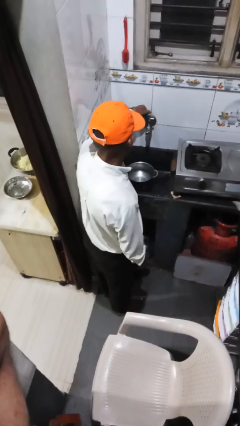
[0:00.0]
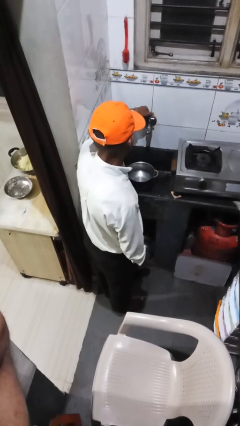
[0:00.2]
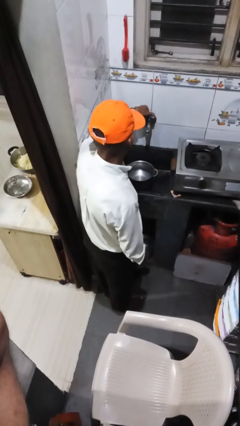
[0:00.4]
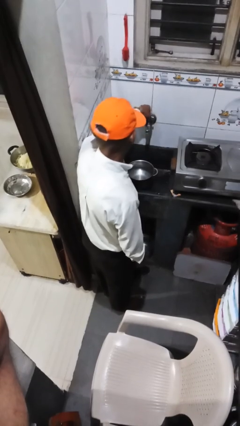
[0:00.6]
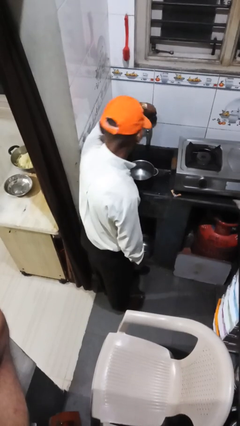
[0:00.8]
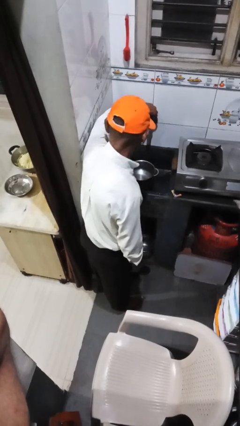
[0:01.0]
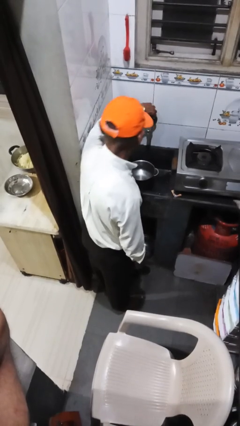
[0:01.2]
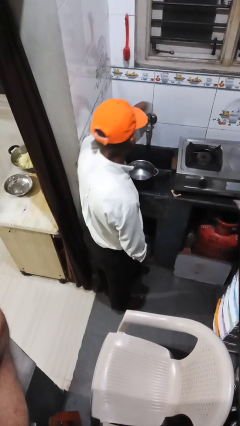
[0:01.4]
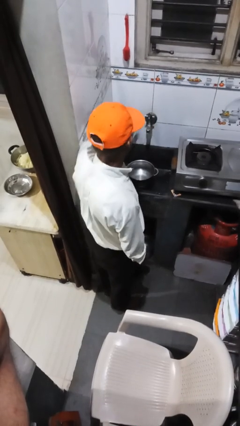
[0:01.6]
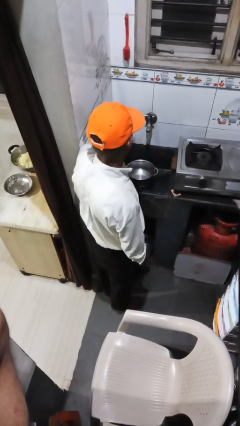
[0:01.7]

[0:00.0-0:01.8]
person turns off faucet

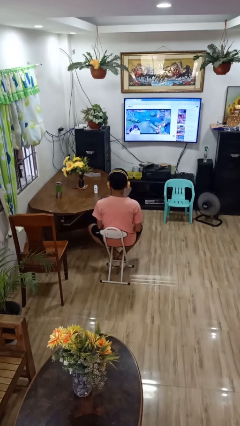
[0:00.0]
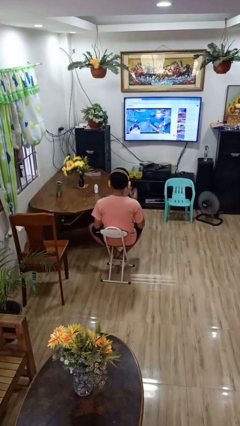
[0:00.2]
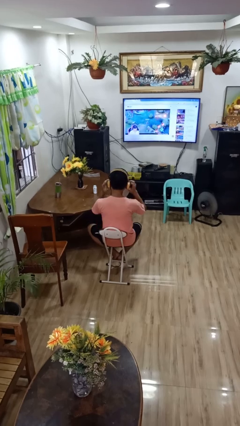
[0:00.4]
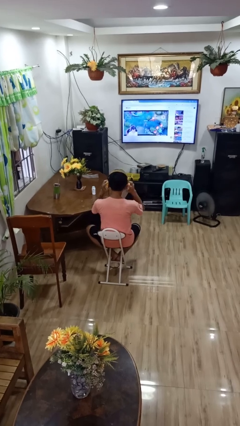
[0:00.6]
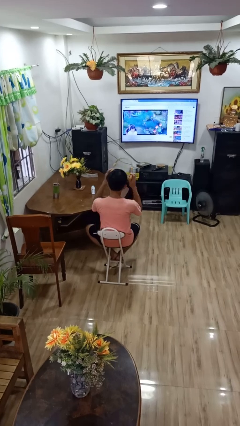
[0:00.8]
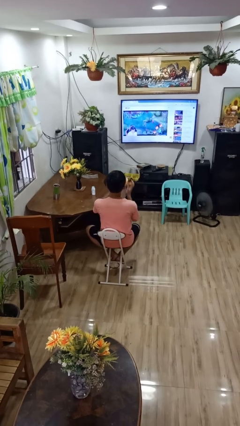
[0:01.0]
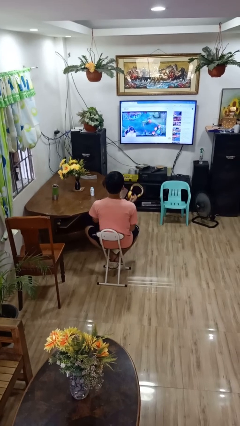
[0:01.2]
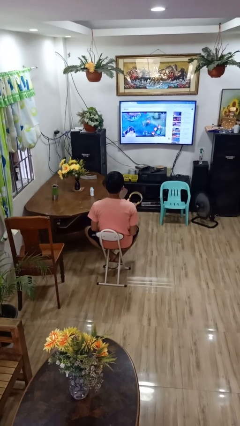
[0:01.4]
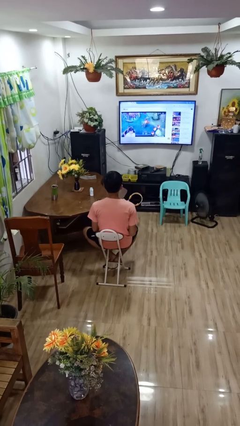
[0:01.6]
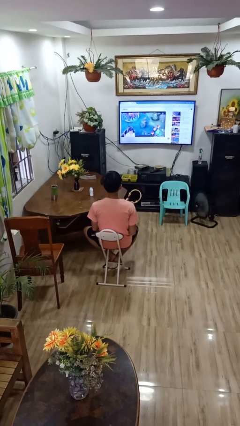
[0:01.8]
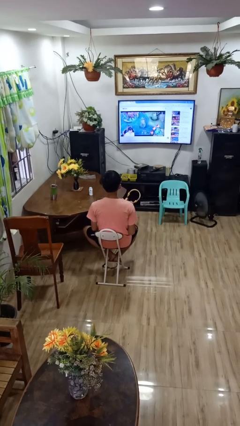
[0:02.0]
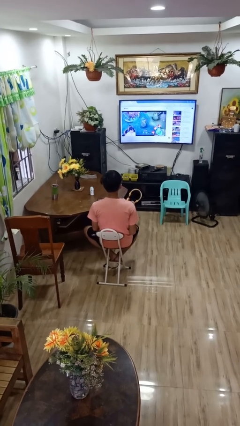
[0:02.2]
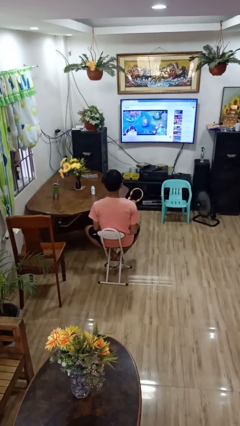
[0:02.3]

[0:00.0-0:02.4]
person takes off headphones

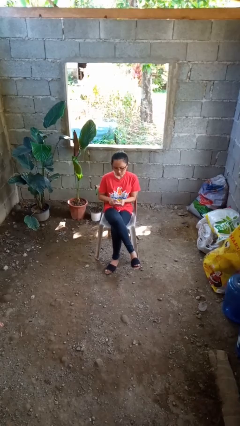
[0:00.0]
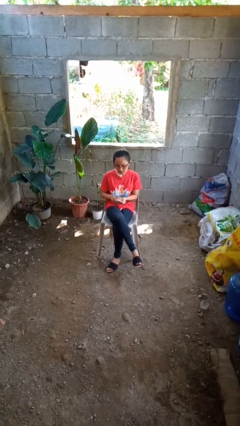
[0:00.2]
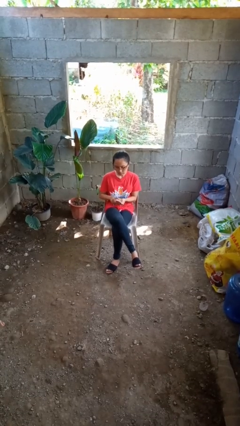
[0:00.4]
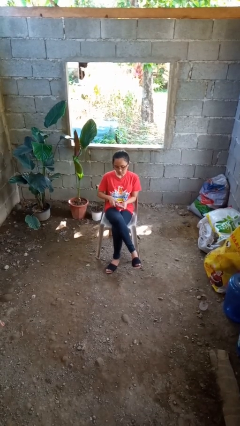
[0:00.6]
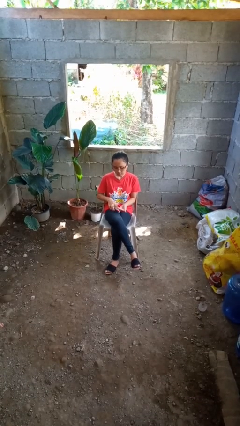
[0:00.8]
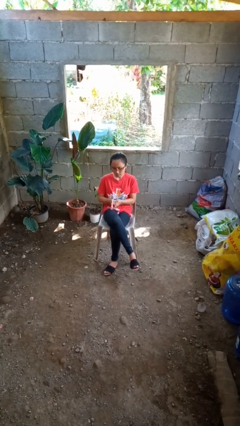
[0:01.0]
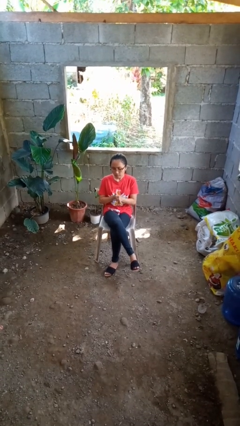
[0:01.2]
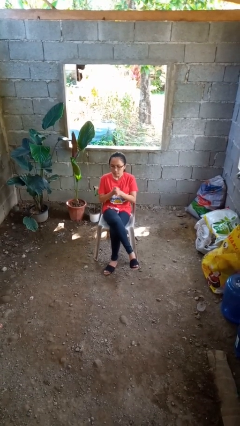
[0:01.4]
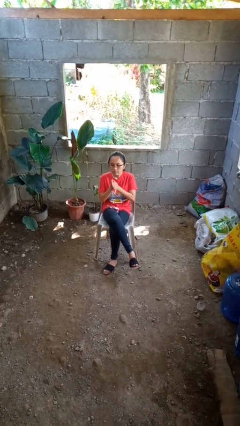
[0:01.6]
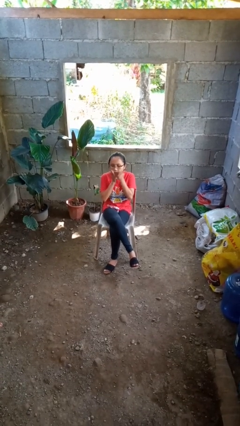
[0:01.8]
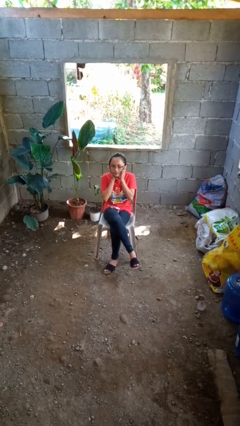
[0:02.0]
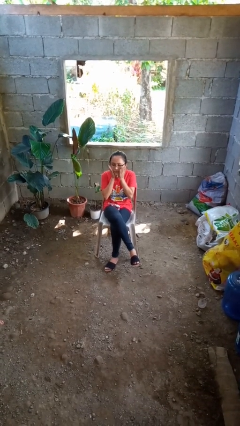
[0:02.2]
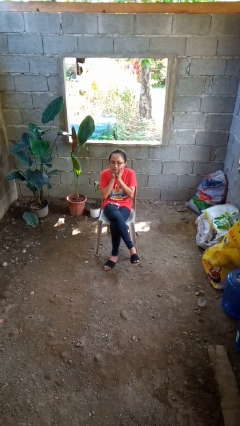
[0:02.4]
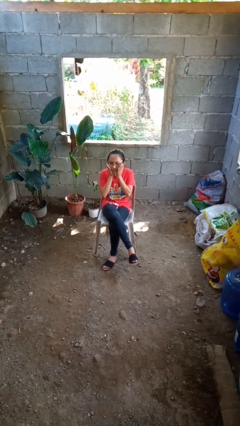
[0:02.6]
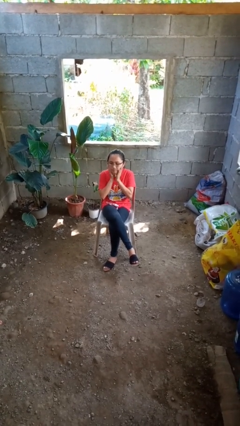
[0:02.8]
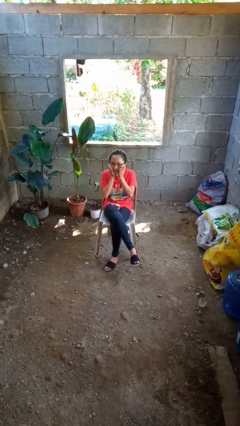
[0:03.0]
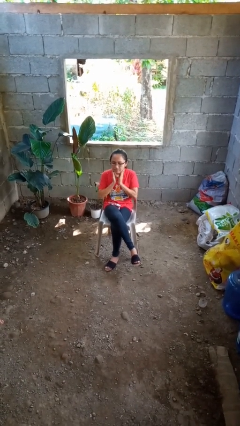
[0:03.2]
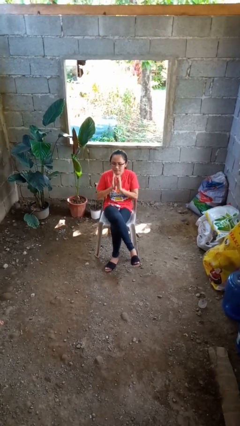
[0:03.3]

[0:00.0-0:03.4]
person applies facial moisturizer

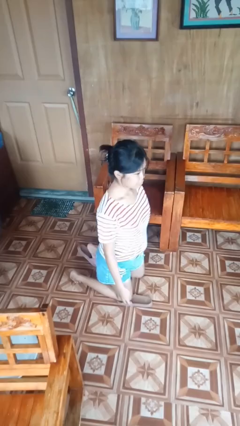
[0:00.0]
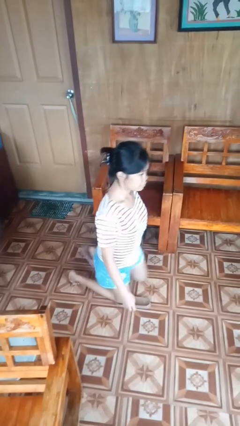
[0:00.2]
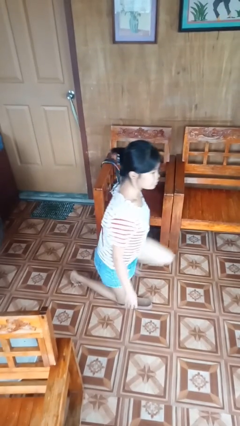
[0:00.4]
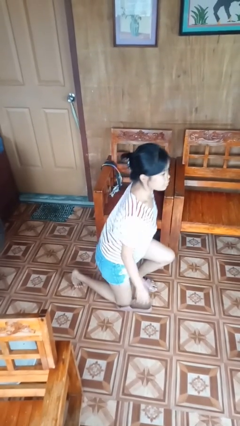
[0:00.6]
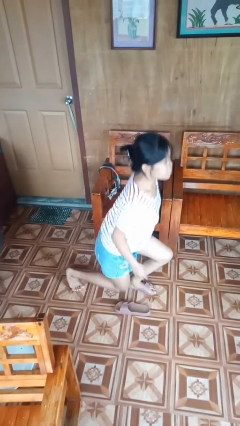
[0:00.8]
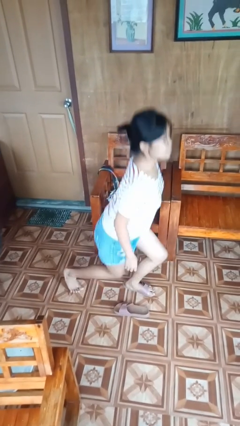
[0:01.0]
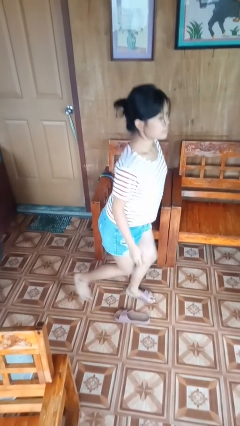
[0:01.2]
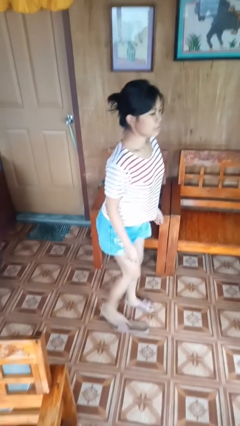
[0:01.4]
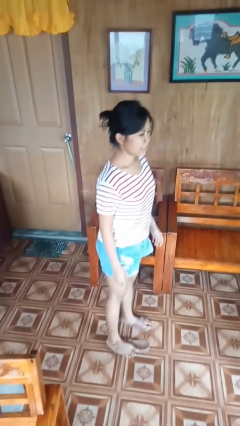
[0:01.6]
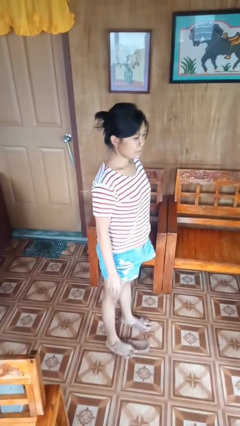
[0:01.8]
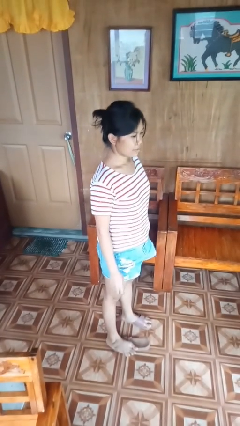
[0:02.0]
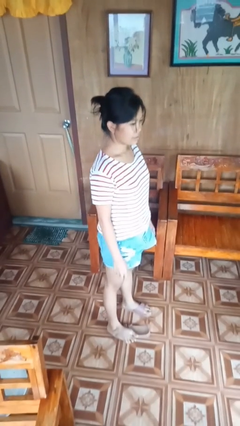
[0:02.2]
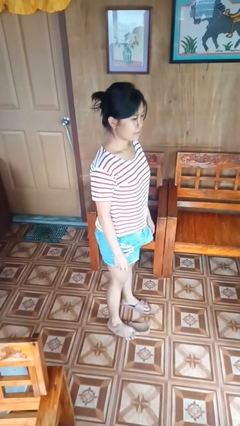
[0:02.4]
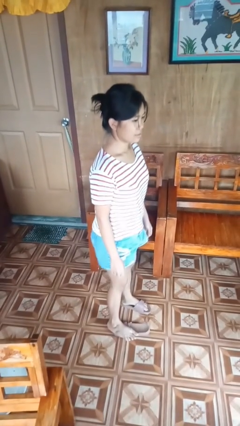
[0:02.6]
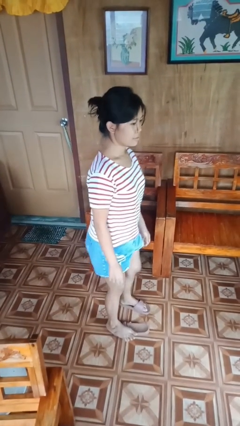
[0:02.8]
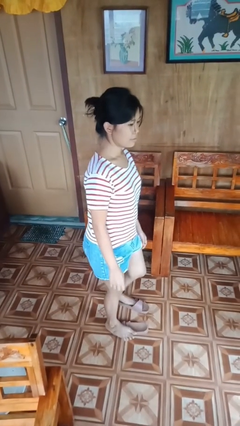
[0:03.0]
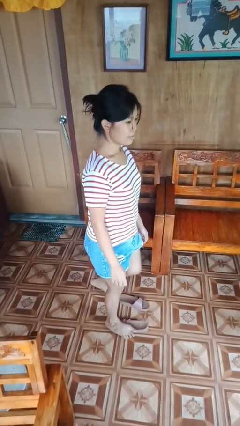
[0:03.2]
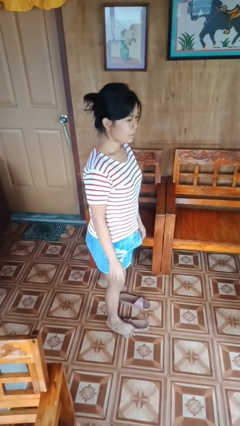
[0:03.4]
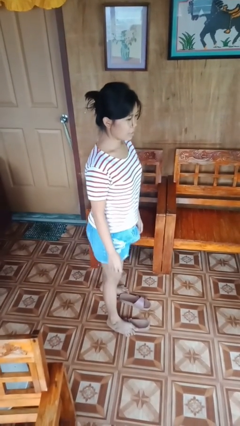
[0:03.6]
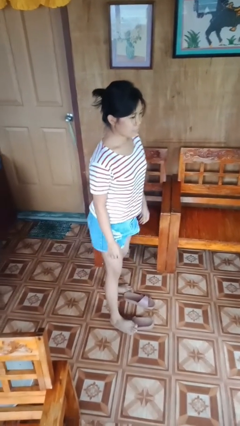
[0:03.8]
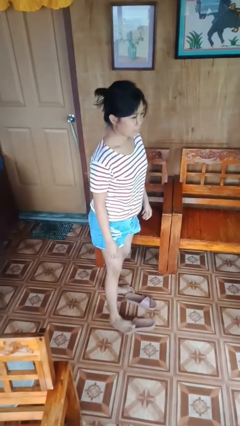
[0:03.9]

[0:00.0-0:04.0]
person stands up from floor

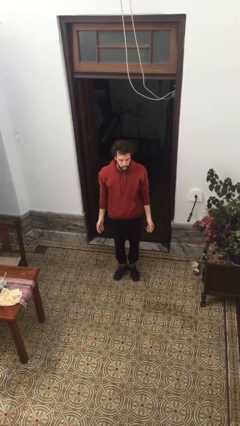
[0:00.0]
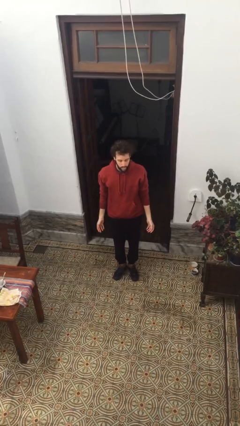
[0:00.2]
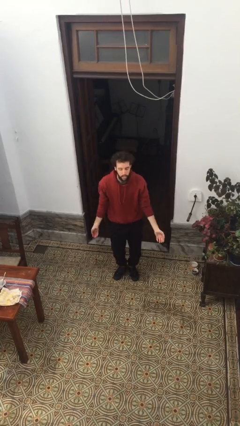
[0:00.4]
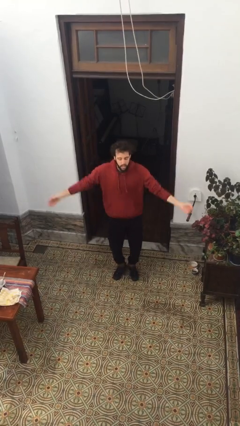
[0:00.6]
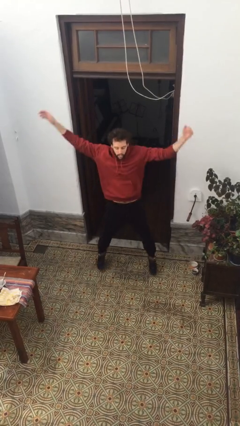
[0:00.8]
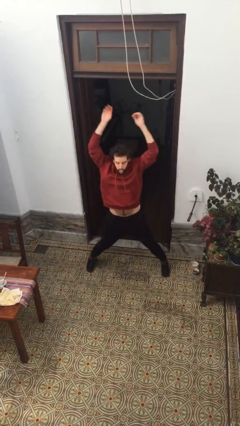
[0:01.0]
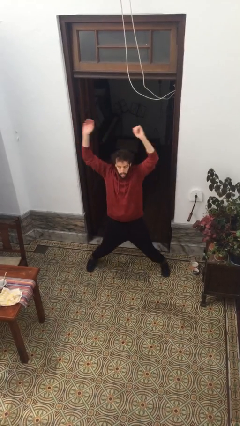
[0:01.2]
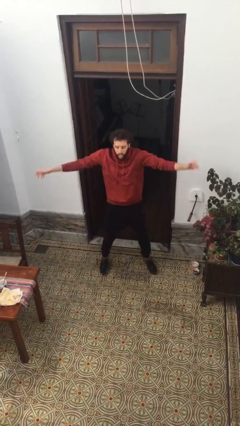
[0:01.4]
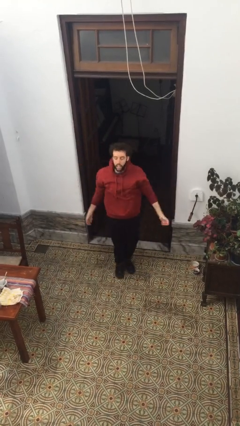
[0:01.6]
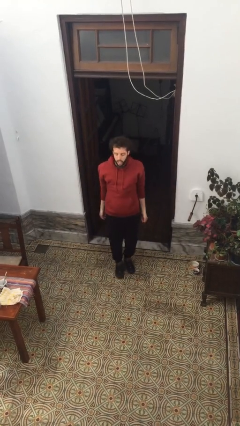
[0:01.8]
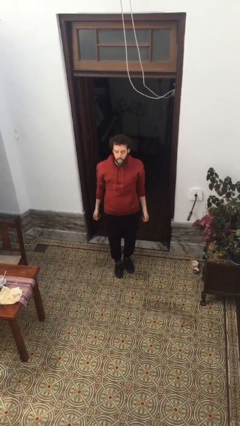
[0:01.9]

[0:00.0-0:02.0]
person exercises with jumping jacks

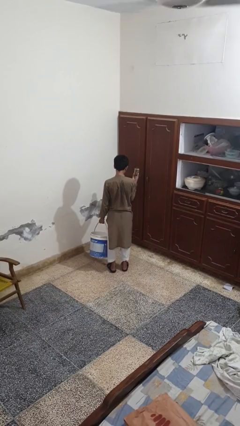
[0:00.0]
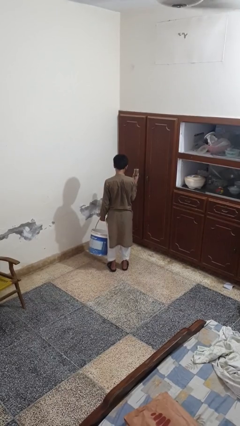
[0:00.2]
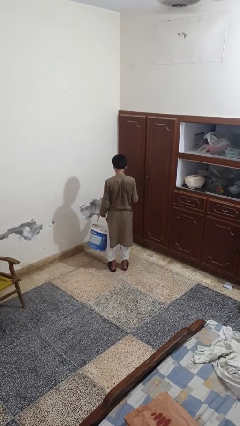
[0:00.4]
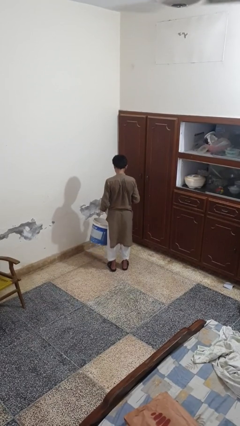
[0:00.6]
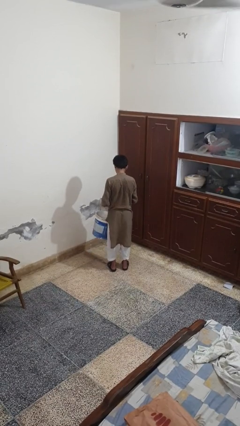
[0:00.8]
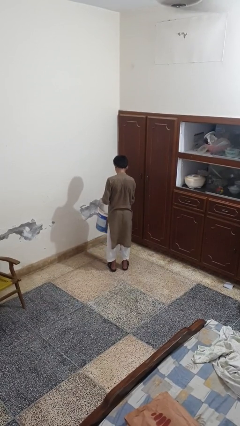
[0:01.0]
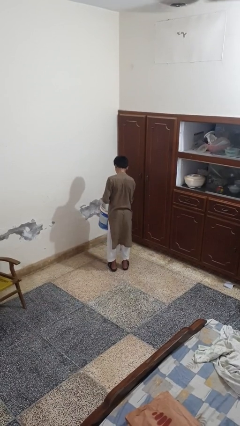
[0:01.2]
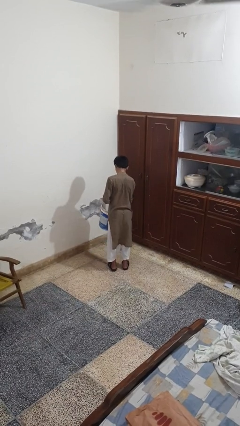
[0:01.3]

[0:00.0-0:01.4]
person puts object into basket

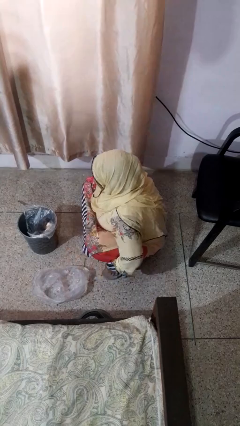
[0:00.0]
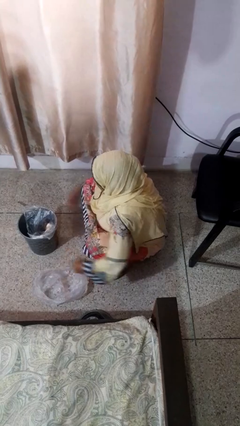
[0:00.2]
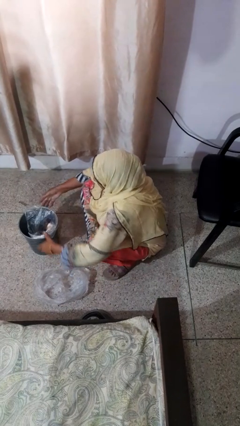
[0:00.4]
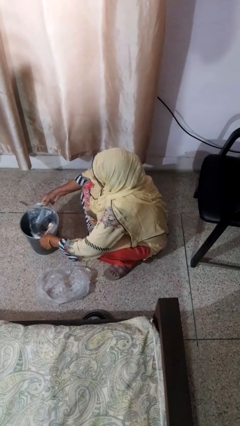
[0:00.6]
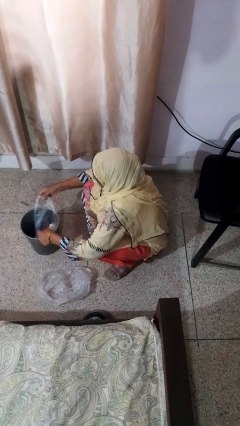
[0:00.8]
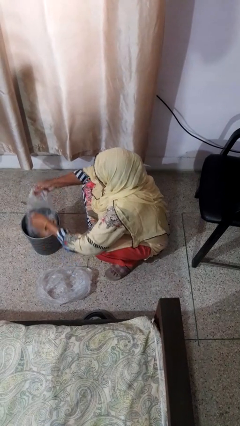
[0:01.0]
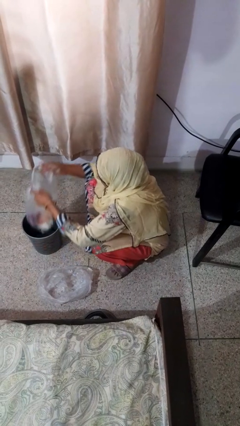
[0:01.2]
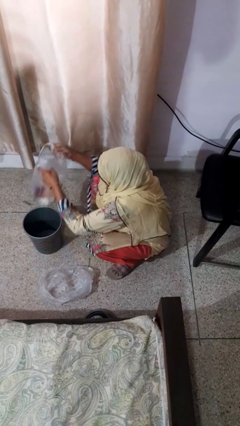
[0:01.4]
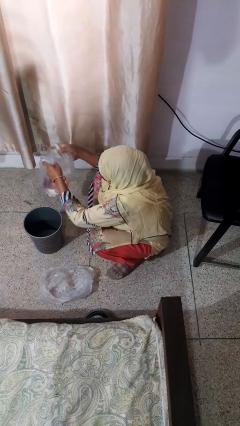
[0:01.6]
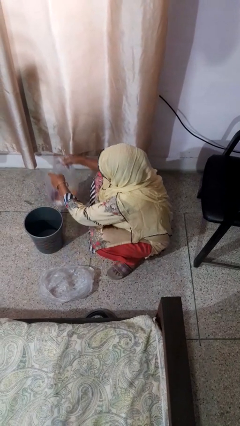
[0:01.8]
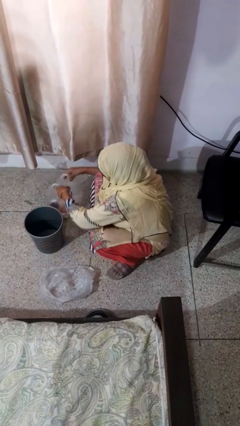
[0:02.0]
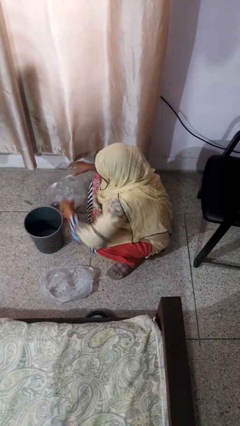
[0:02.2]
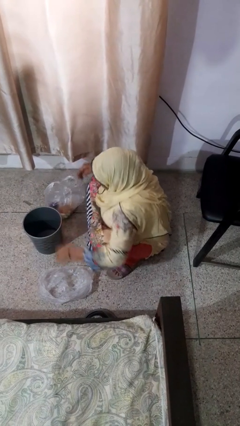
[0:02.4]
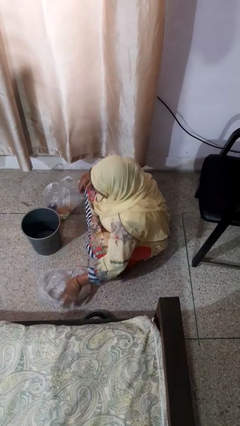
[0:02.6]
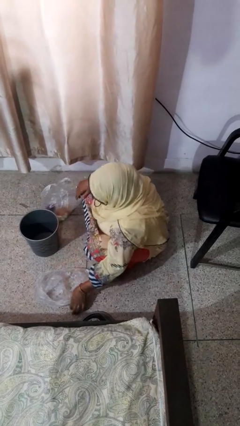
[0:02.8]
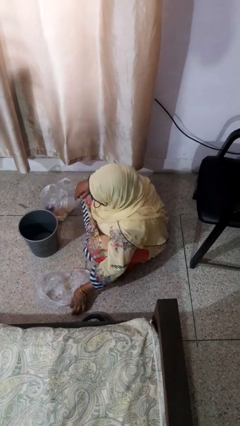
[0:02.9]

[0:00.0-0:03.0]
person removes trashbag from trashcan
